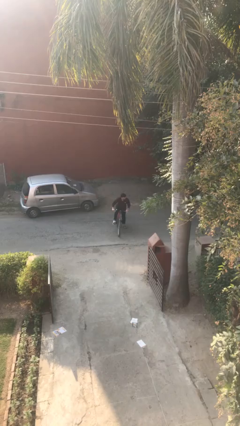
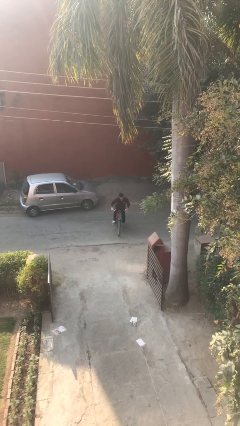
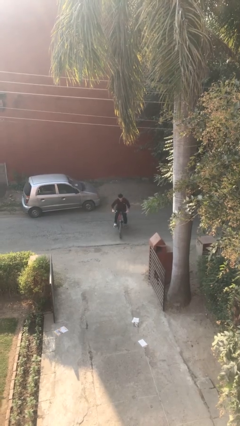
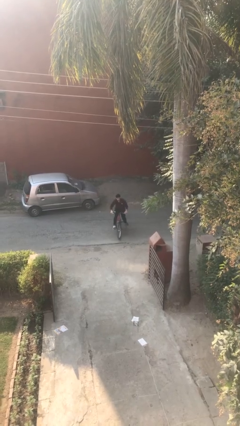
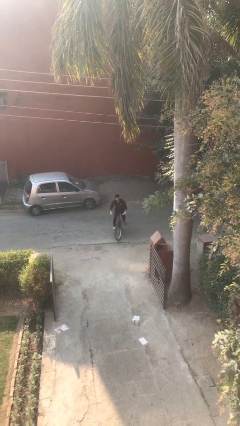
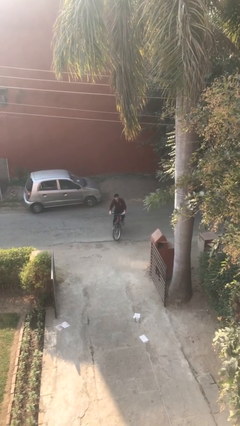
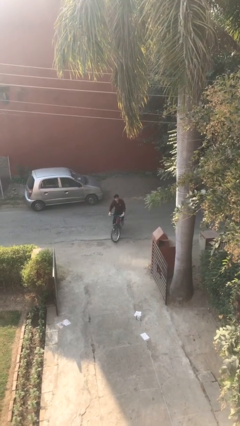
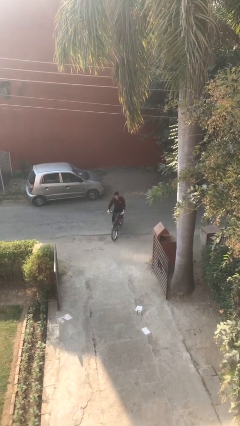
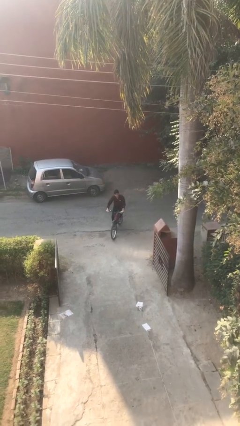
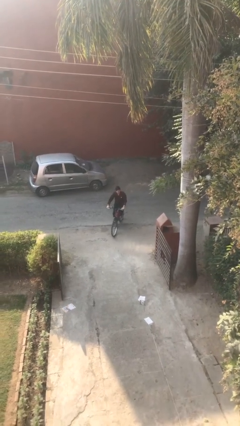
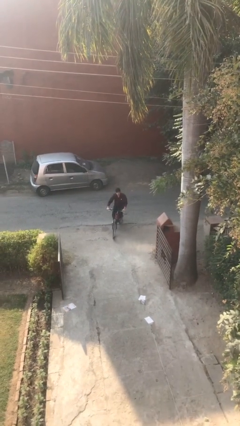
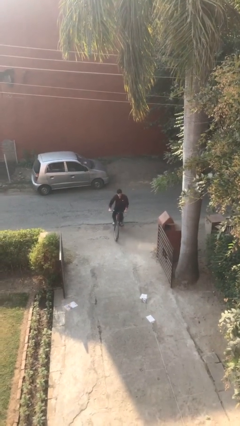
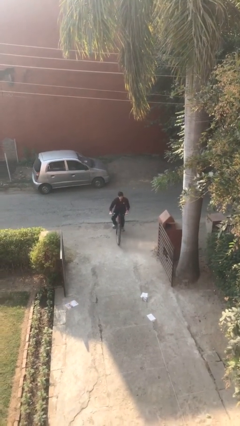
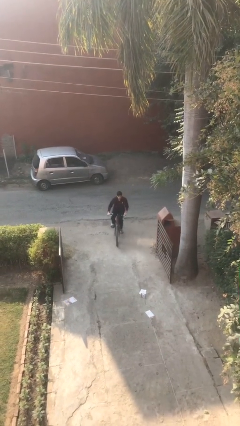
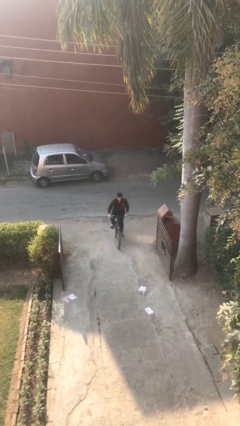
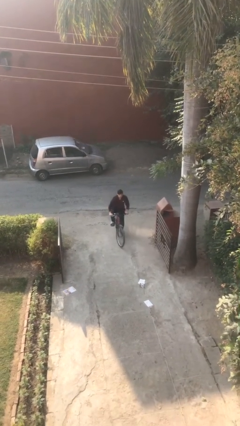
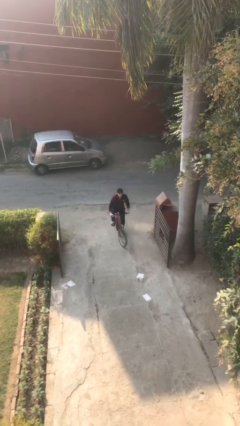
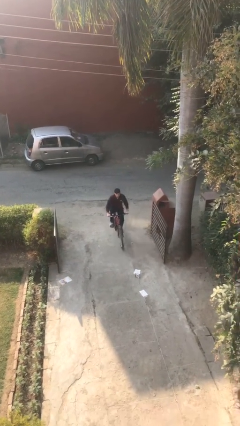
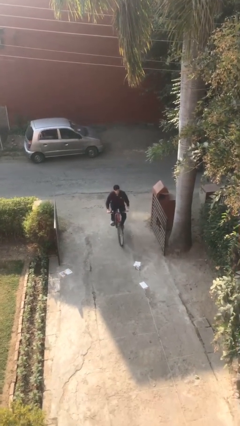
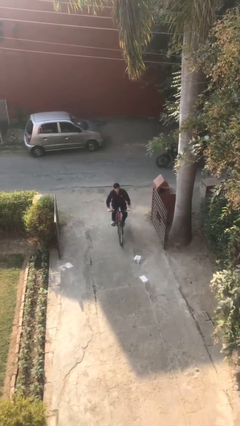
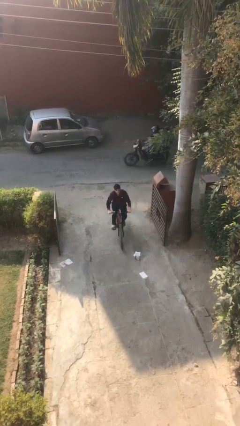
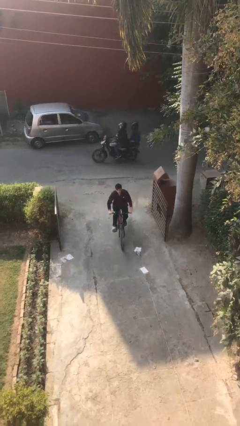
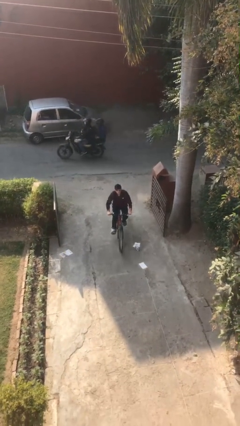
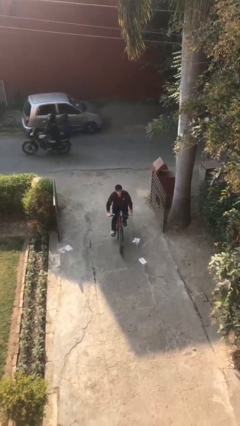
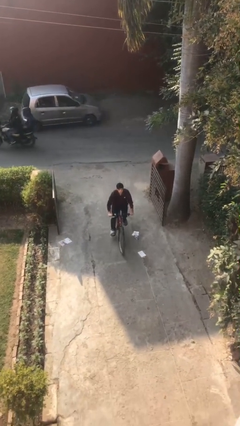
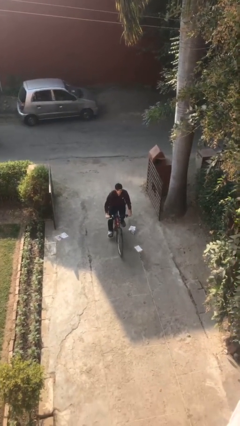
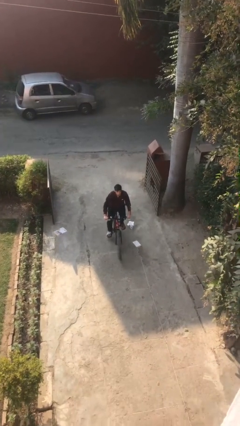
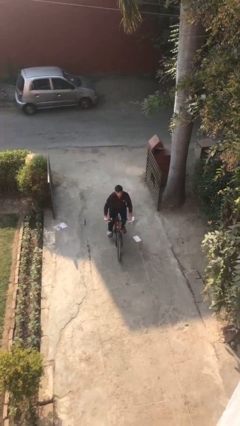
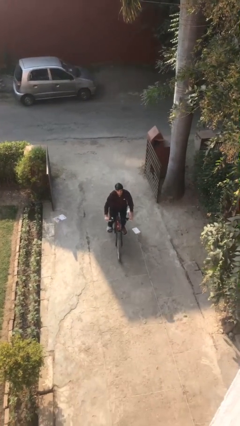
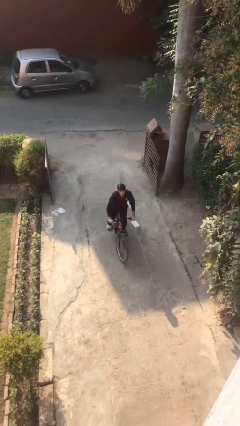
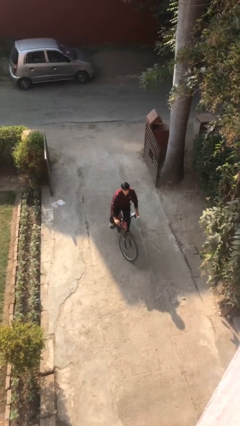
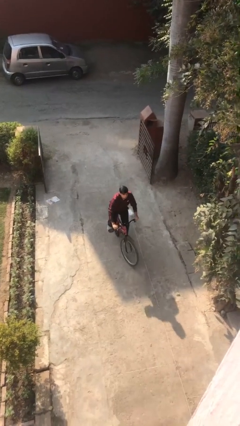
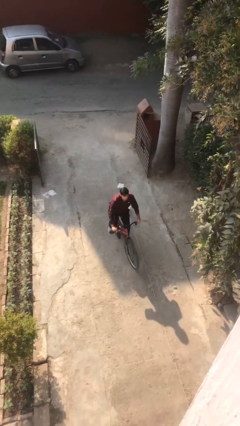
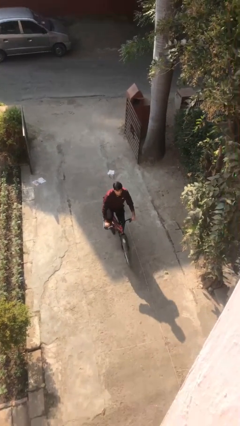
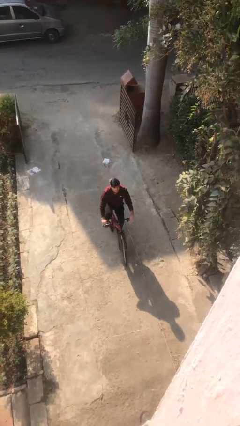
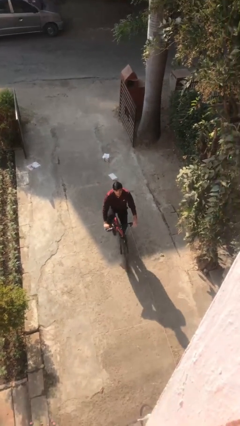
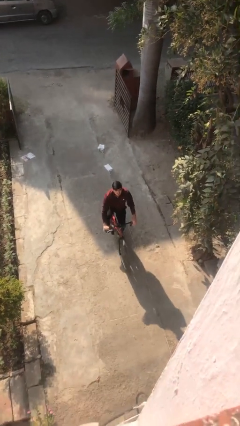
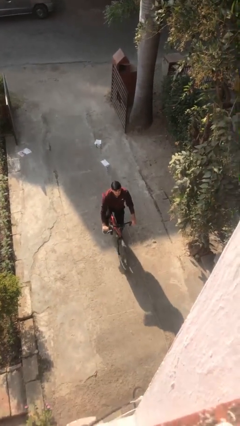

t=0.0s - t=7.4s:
person rides bicycle

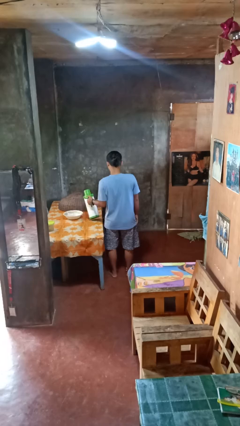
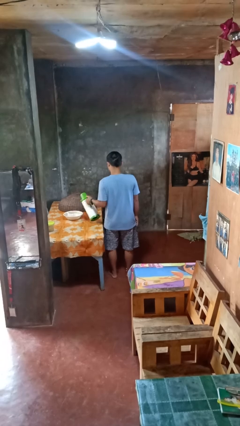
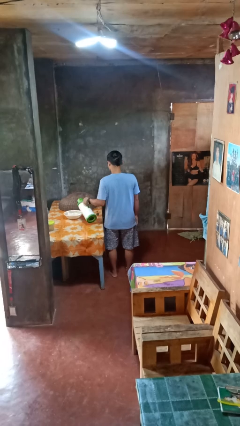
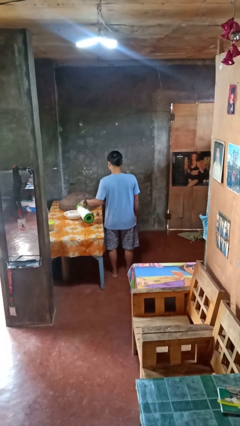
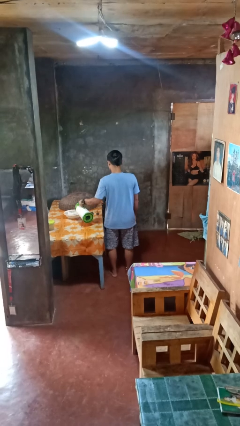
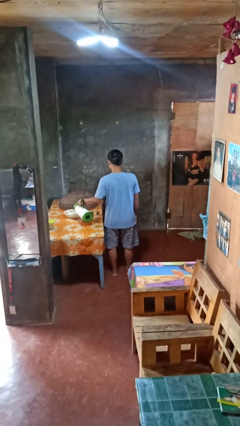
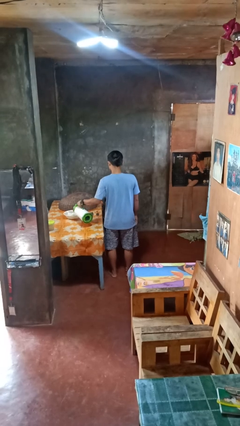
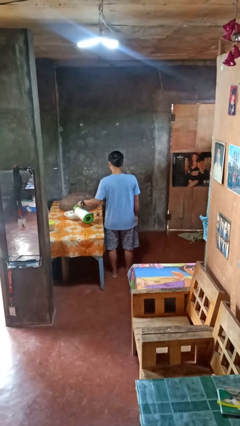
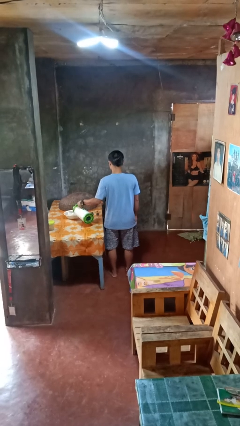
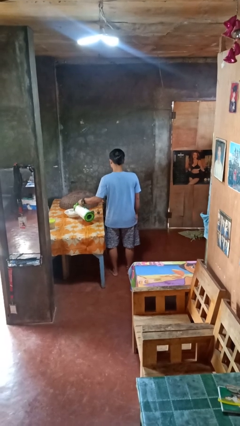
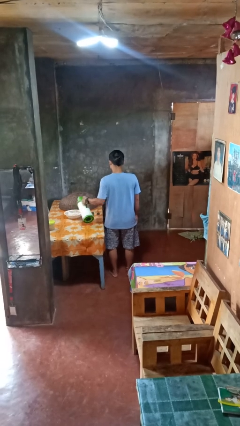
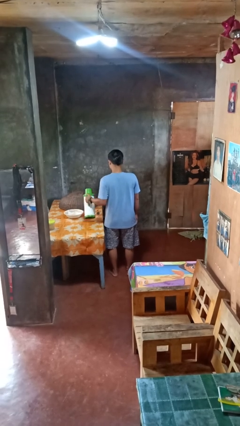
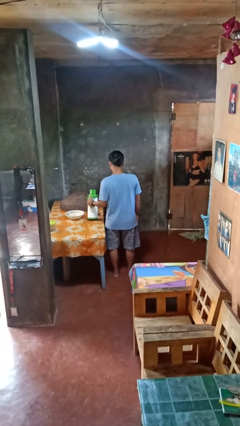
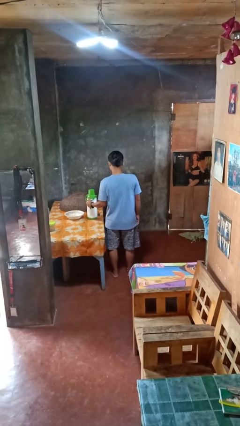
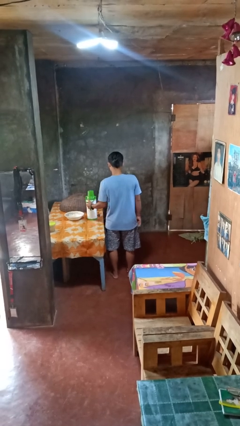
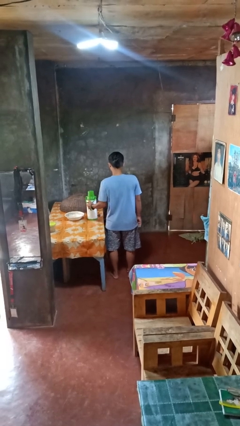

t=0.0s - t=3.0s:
person pours into bowl

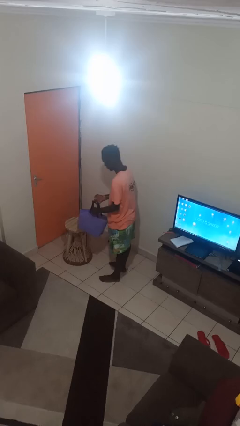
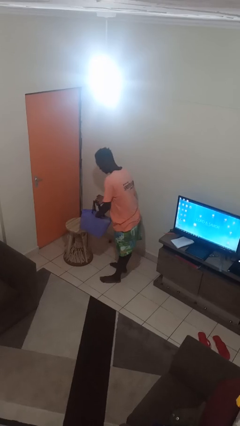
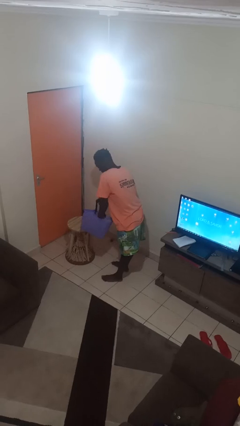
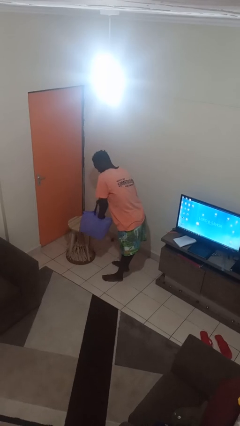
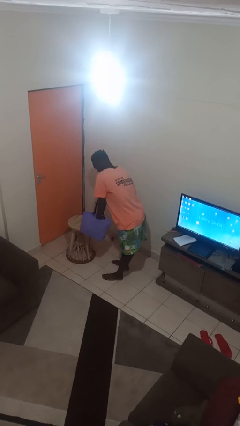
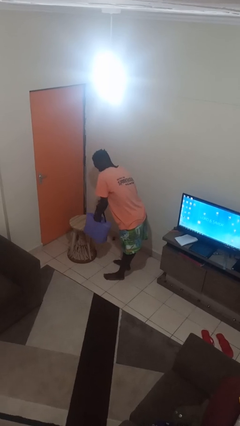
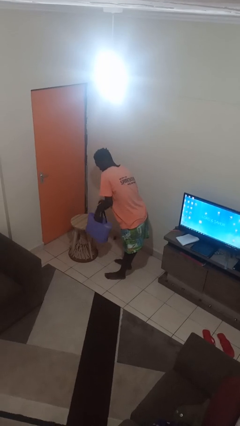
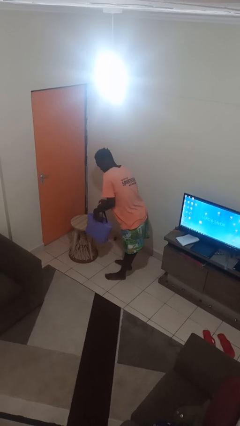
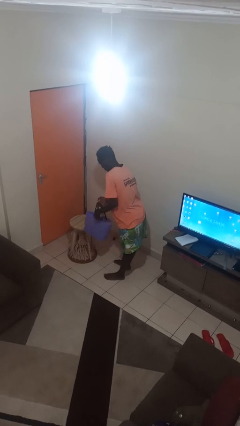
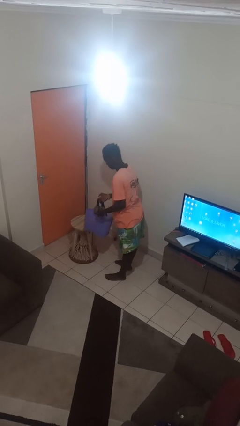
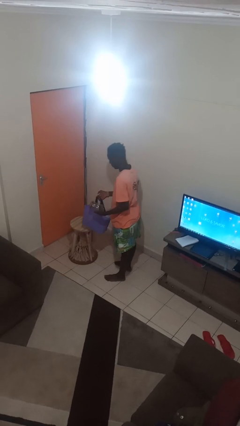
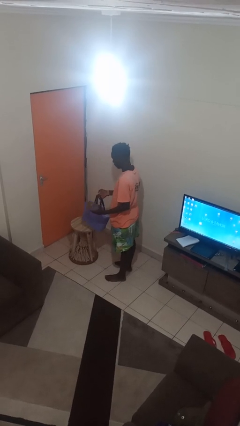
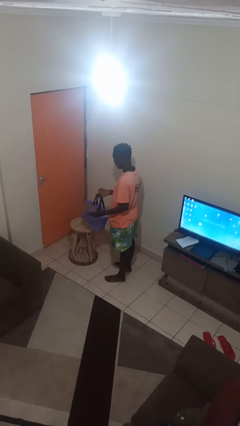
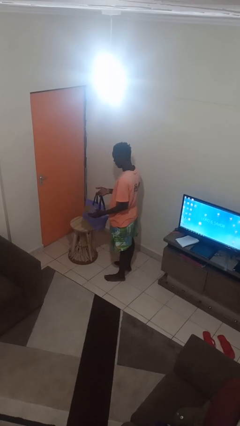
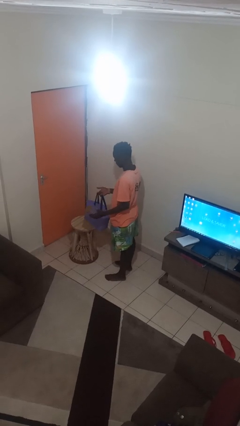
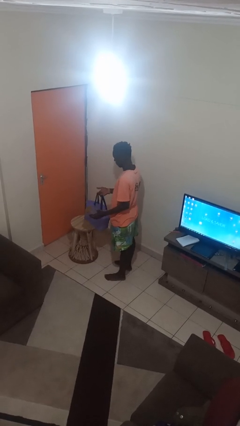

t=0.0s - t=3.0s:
person takes object from bag

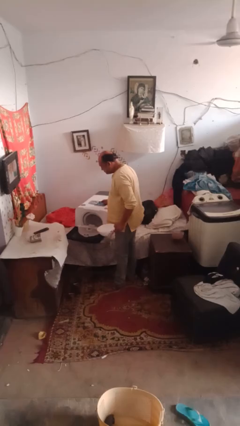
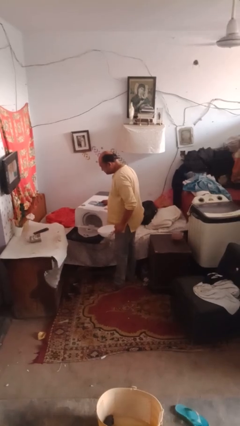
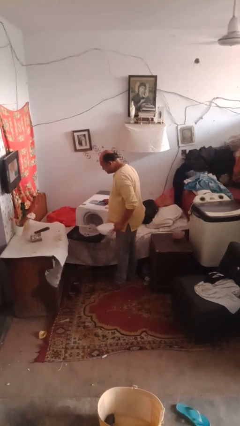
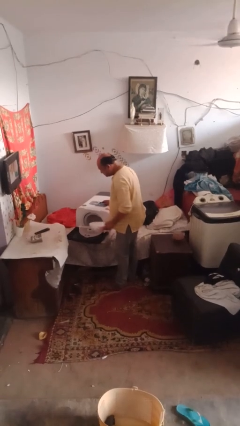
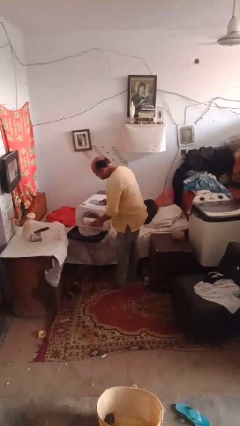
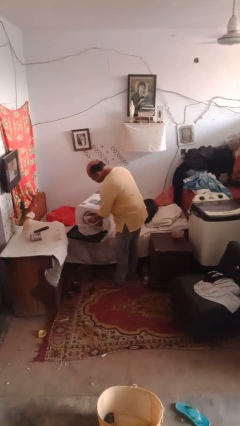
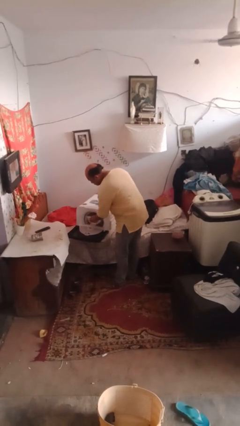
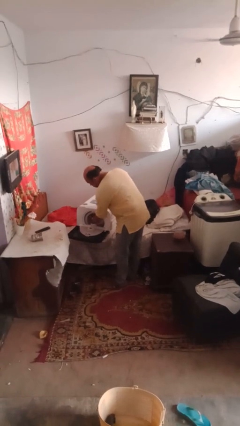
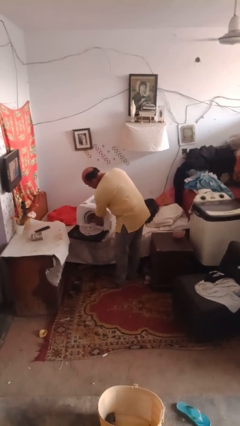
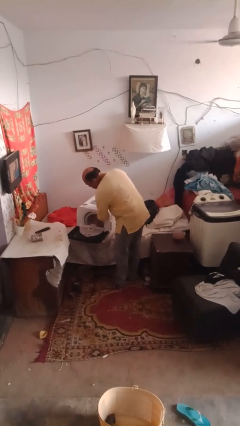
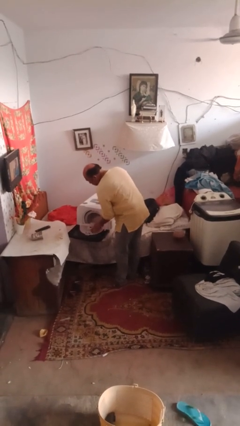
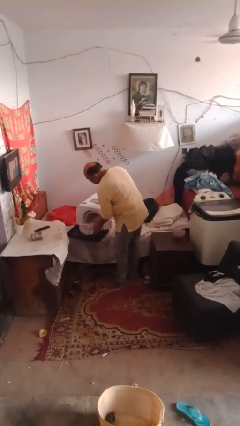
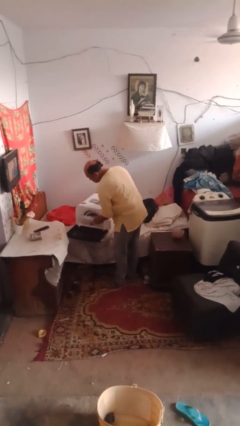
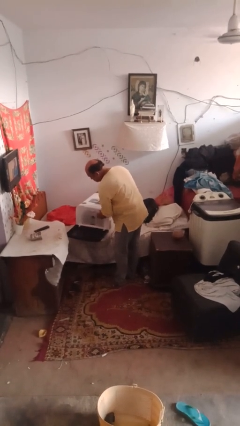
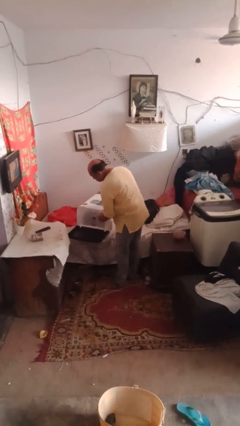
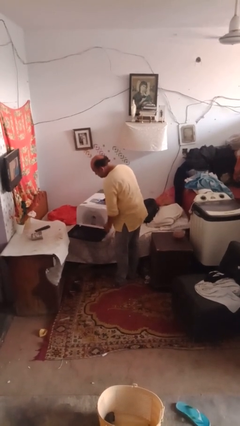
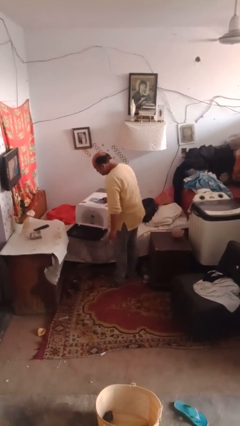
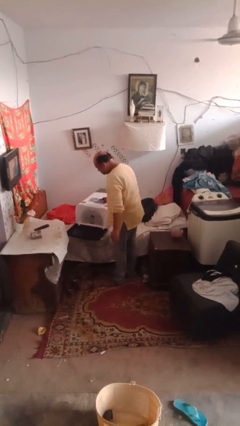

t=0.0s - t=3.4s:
person loads dishwasher

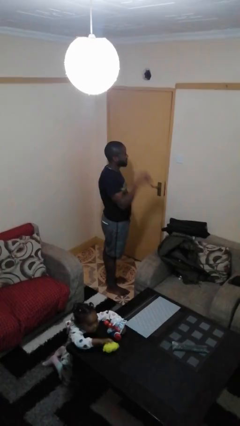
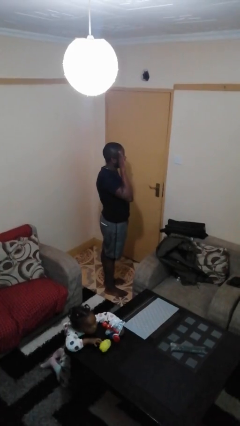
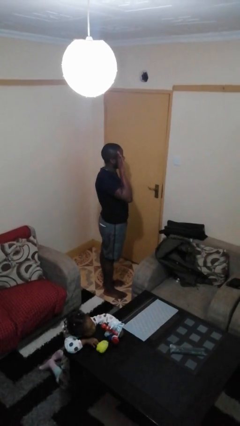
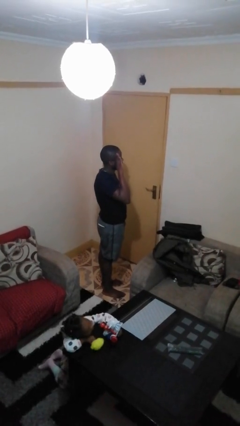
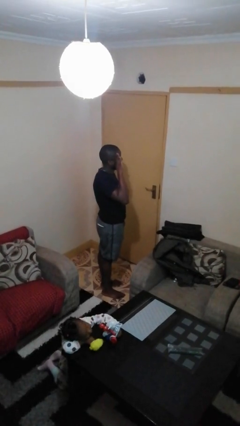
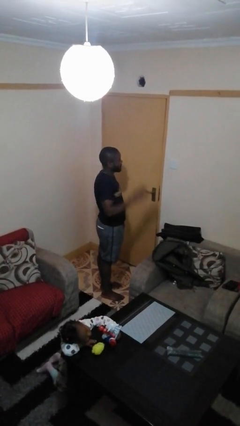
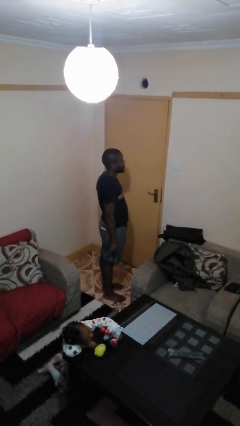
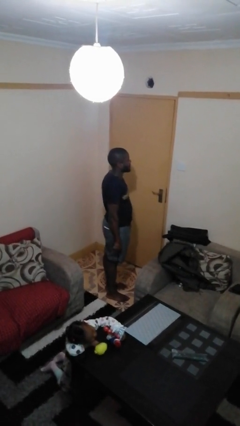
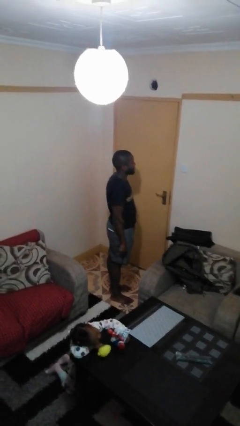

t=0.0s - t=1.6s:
person salutes
